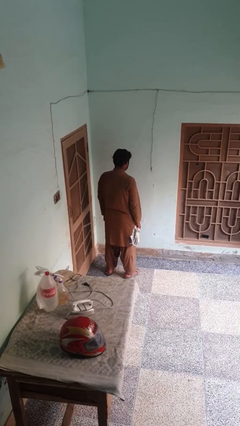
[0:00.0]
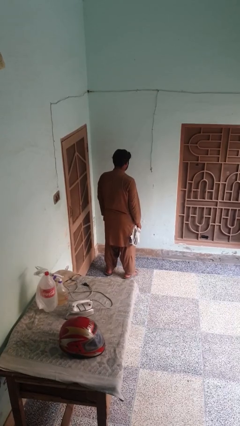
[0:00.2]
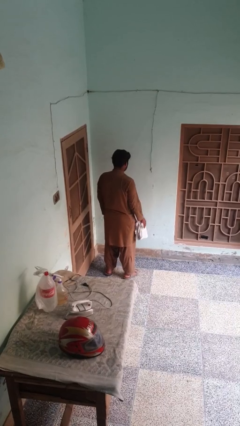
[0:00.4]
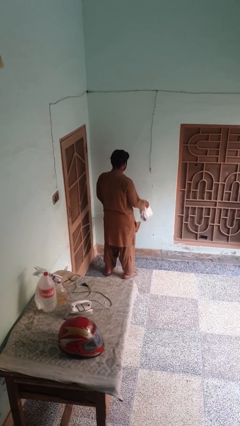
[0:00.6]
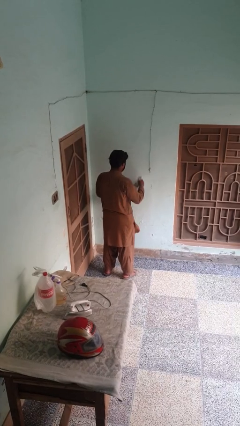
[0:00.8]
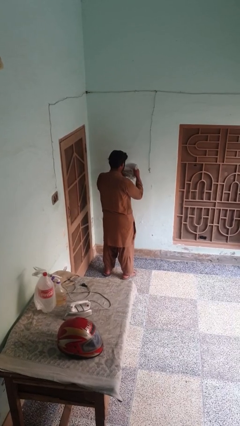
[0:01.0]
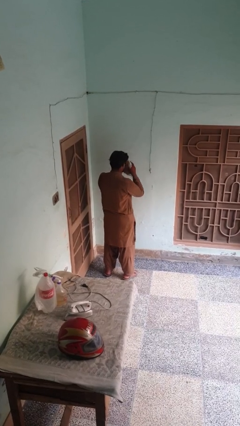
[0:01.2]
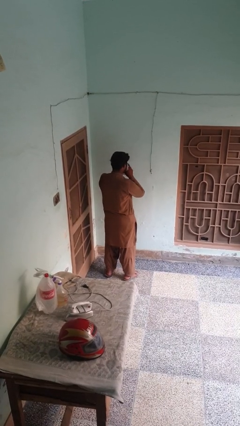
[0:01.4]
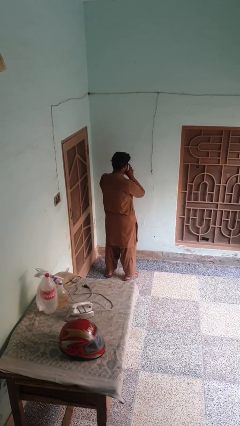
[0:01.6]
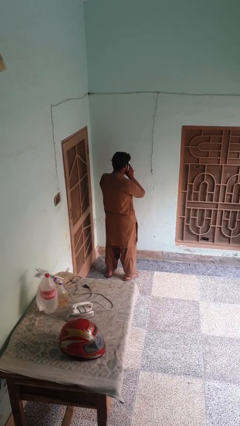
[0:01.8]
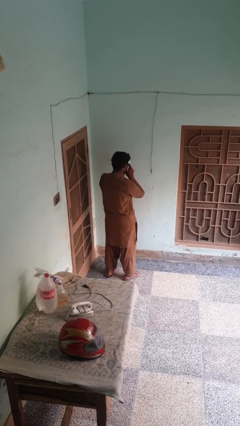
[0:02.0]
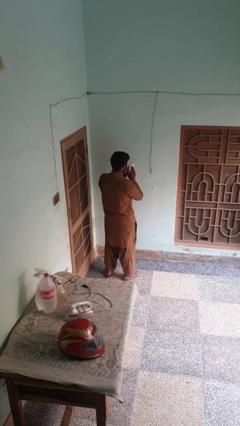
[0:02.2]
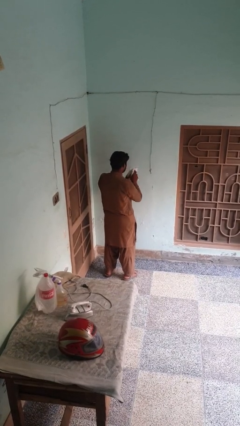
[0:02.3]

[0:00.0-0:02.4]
person blows nose

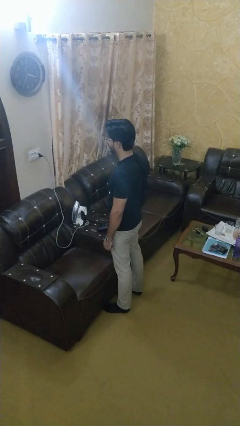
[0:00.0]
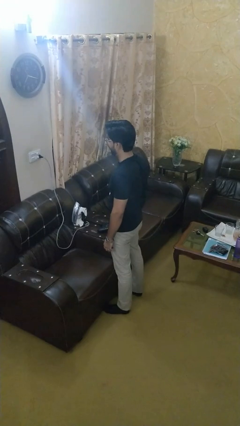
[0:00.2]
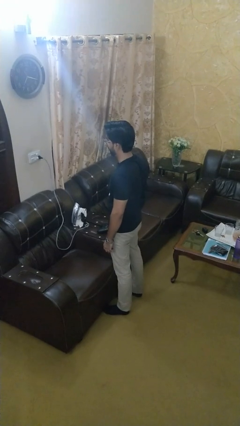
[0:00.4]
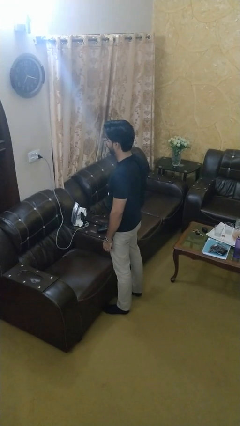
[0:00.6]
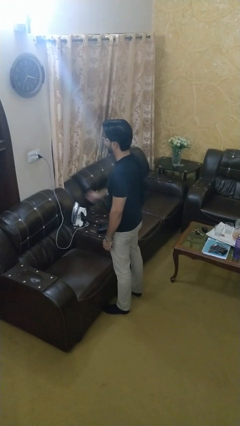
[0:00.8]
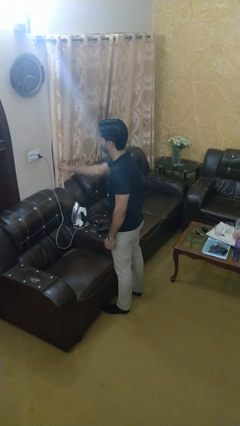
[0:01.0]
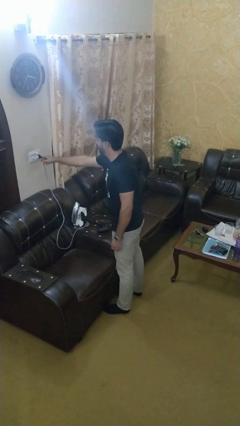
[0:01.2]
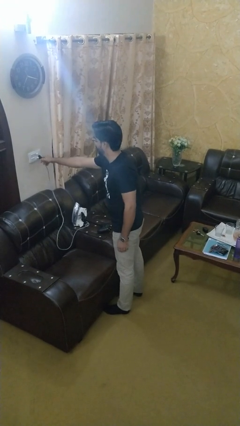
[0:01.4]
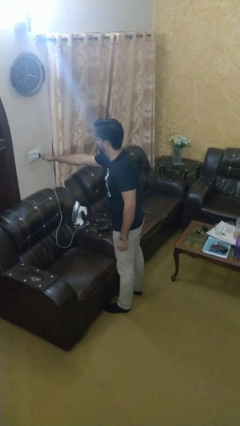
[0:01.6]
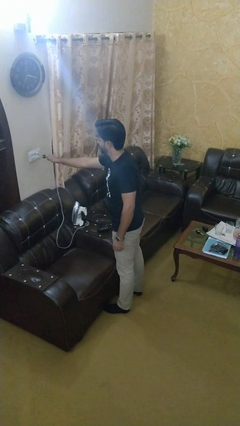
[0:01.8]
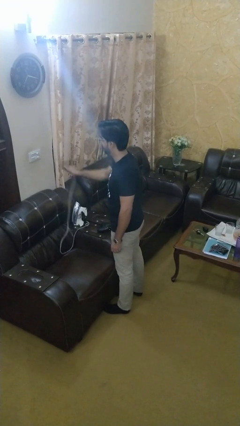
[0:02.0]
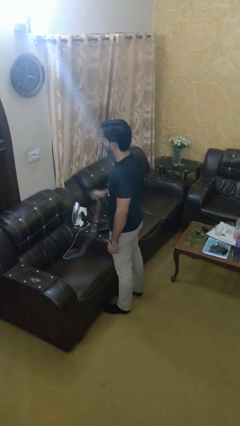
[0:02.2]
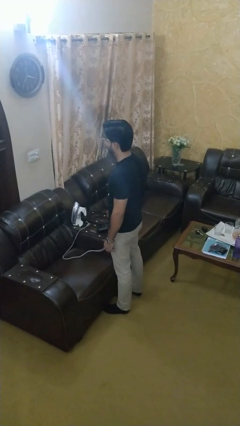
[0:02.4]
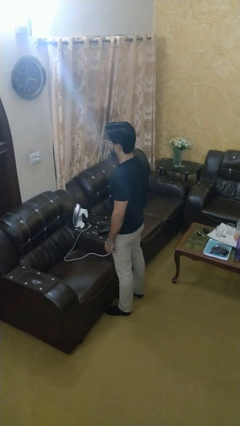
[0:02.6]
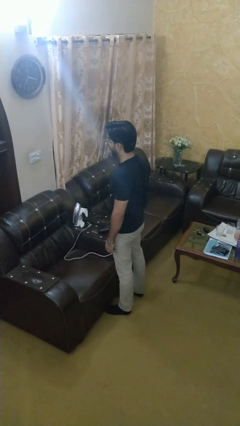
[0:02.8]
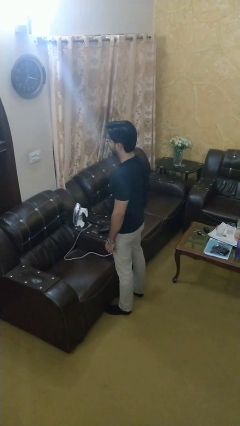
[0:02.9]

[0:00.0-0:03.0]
person unplugs from electrical socket

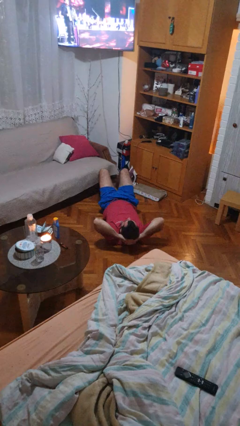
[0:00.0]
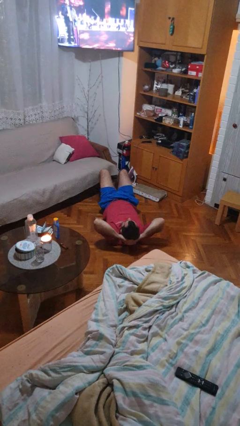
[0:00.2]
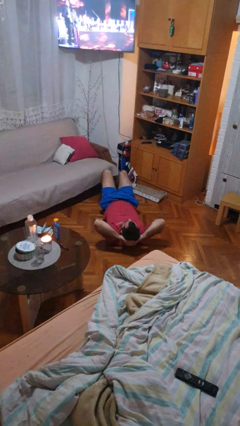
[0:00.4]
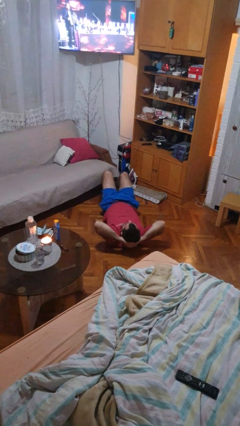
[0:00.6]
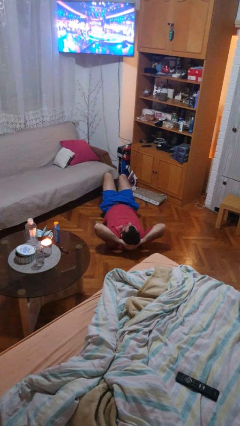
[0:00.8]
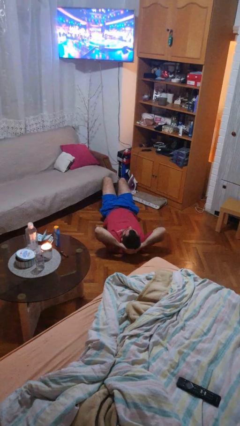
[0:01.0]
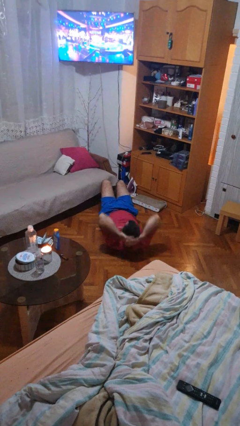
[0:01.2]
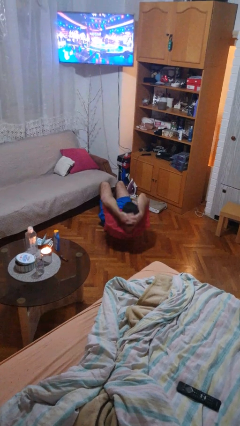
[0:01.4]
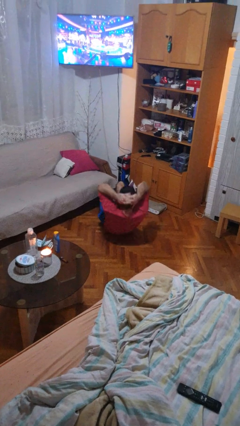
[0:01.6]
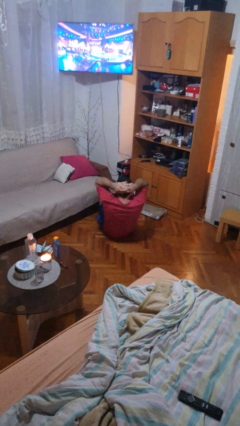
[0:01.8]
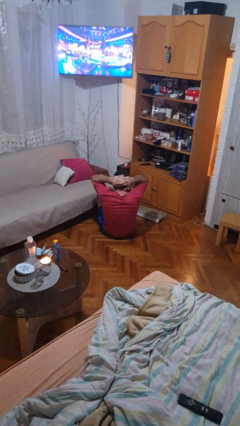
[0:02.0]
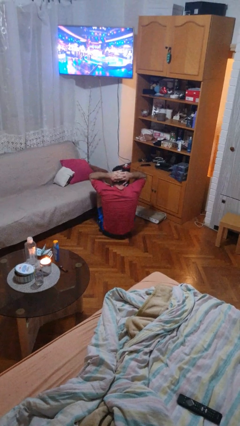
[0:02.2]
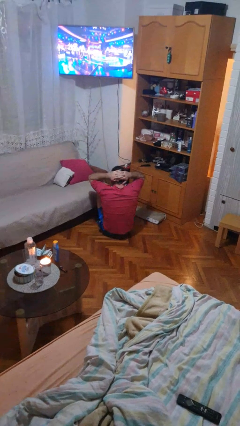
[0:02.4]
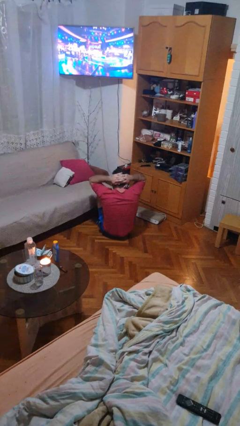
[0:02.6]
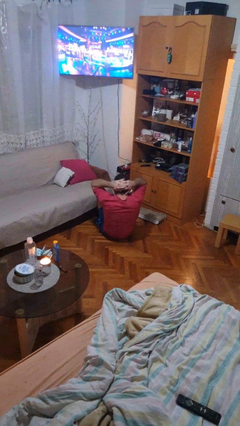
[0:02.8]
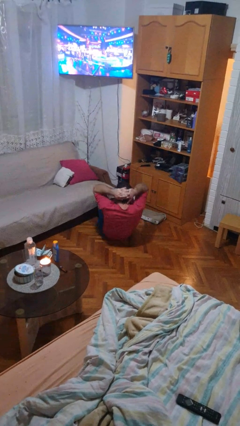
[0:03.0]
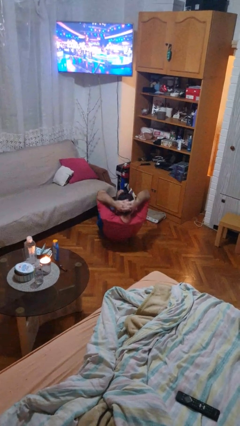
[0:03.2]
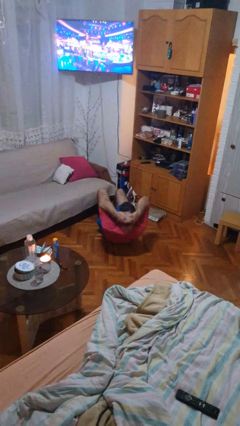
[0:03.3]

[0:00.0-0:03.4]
person exercises with situp

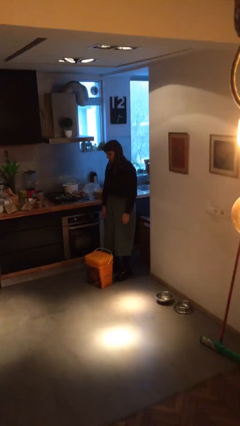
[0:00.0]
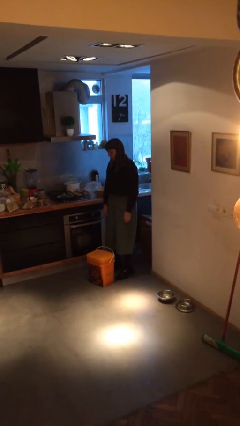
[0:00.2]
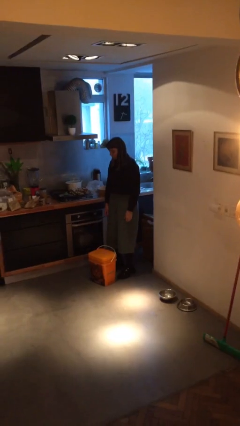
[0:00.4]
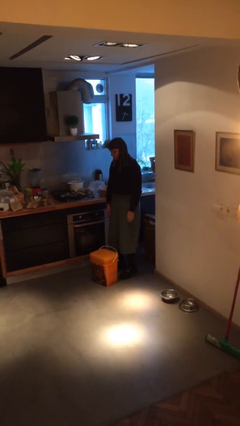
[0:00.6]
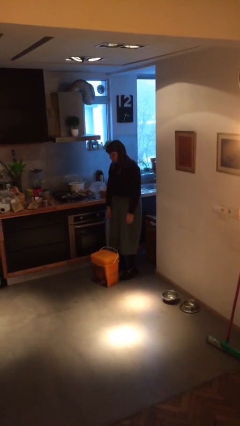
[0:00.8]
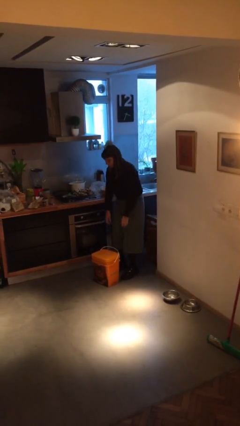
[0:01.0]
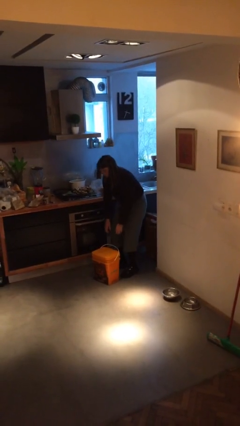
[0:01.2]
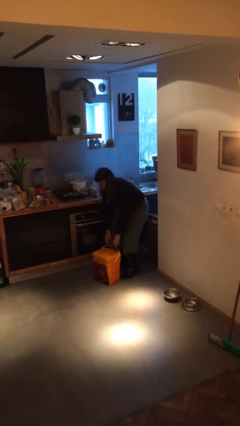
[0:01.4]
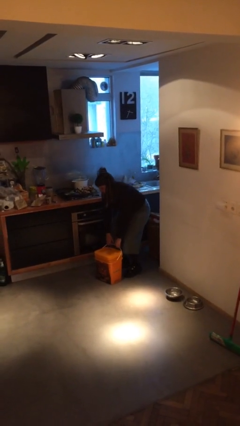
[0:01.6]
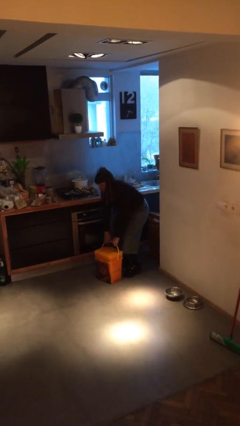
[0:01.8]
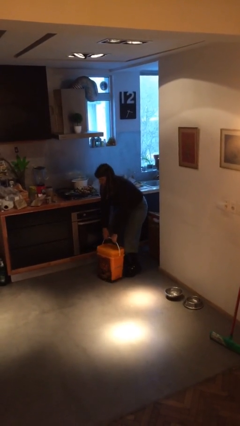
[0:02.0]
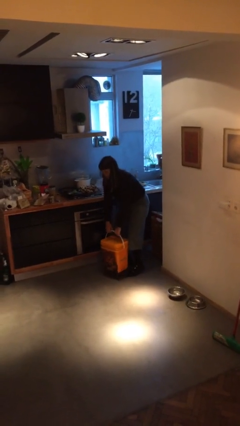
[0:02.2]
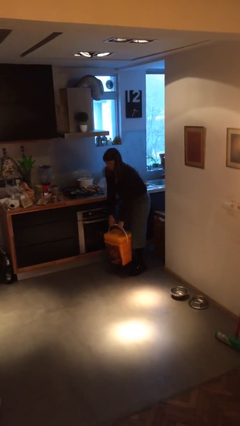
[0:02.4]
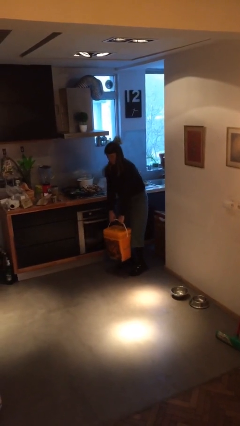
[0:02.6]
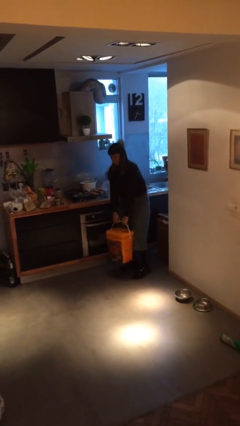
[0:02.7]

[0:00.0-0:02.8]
person picks up object from floor

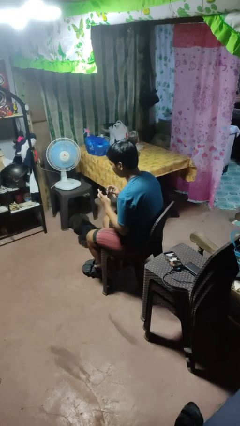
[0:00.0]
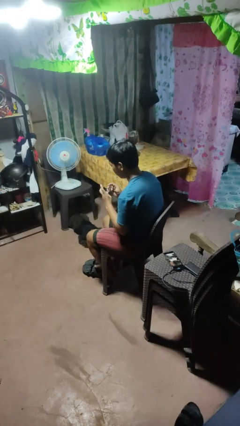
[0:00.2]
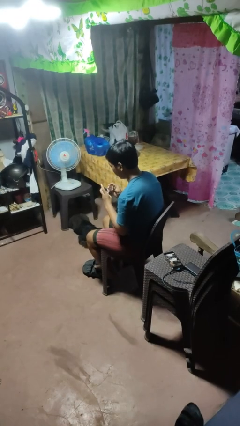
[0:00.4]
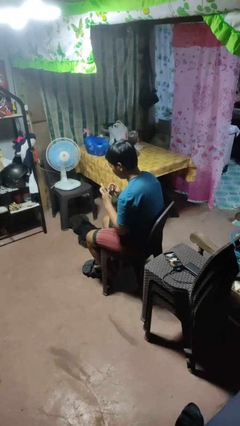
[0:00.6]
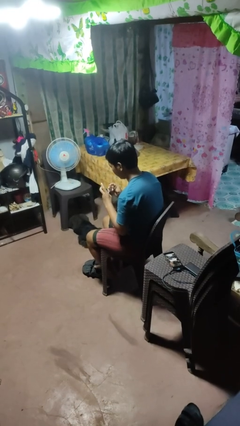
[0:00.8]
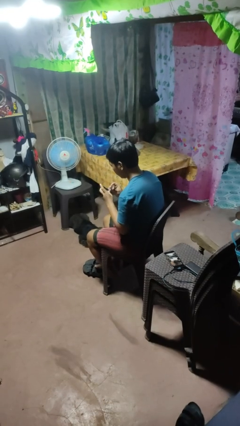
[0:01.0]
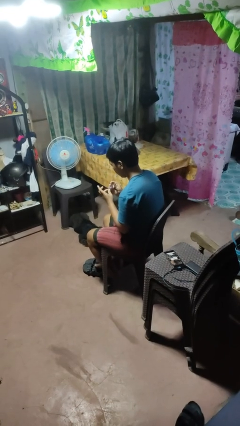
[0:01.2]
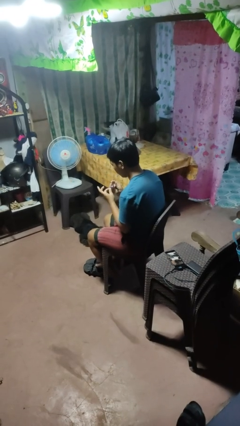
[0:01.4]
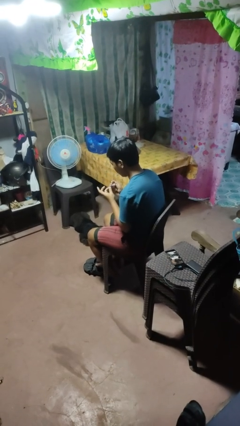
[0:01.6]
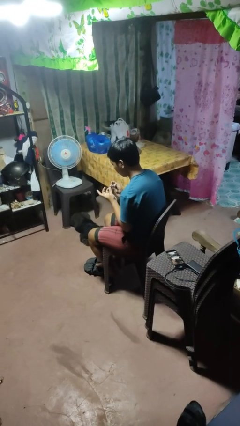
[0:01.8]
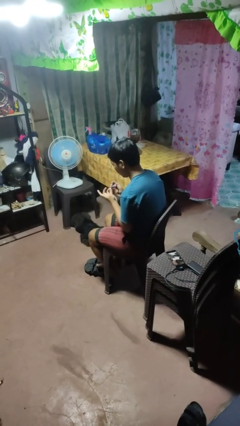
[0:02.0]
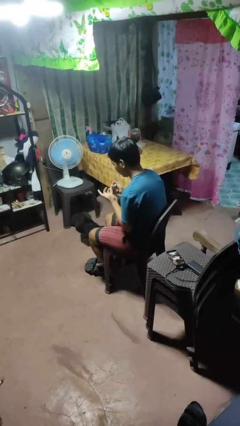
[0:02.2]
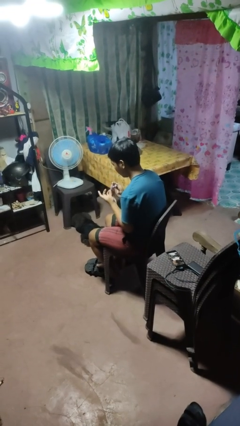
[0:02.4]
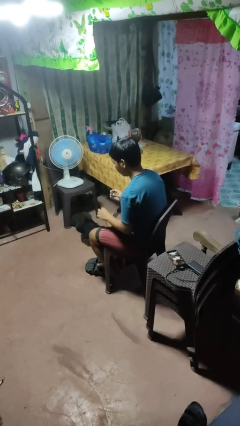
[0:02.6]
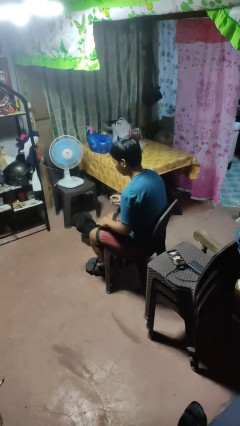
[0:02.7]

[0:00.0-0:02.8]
person clips fingernails

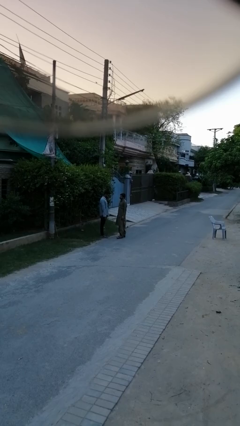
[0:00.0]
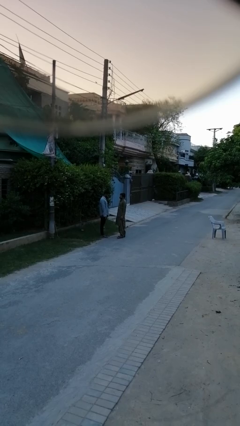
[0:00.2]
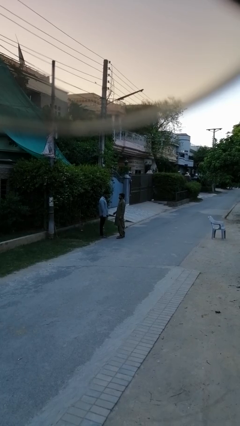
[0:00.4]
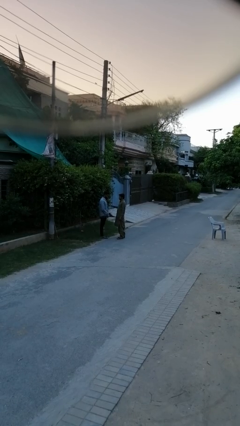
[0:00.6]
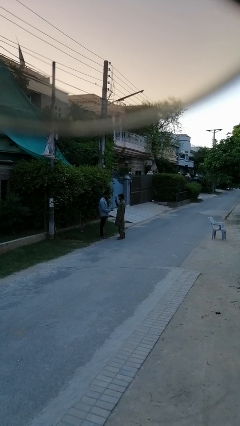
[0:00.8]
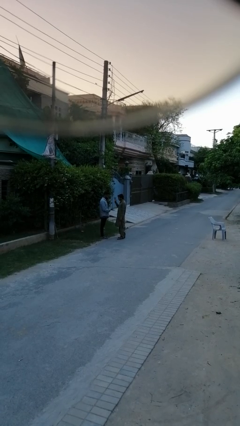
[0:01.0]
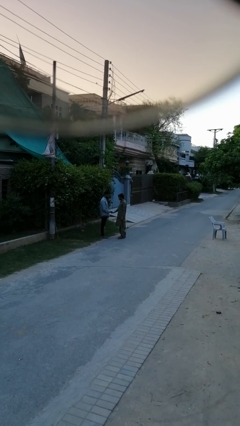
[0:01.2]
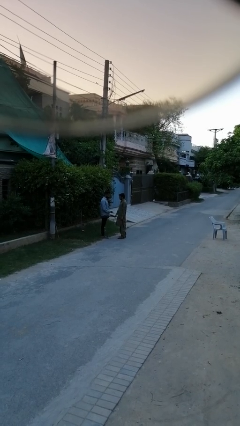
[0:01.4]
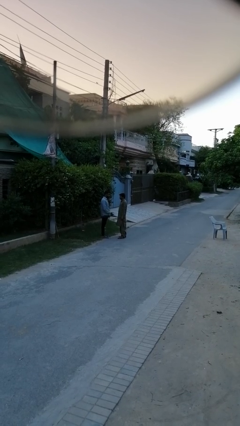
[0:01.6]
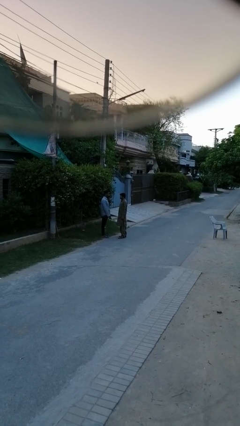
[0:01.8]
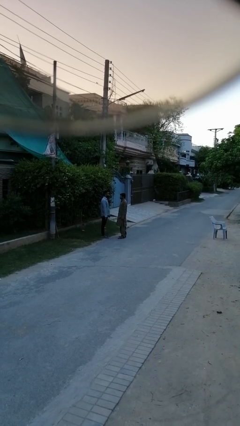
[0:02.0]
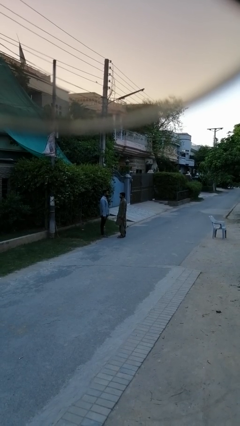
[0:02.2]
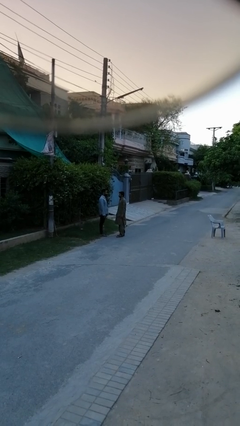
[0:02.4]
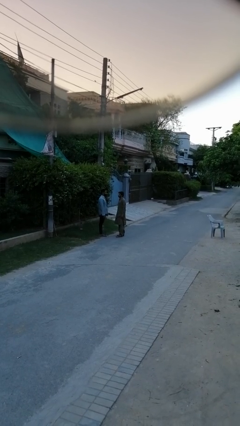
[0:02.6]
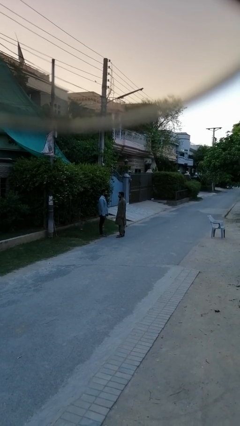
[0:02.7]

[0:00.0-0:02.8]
person highfives hand

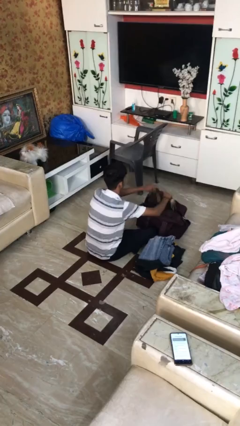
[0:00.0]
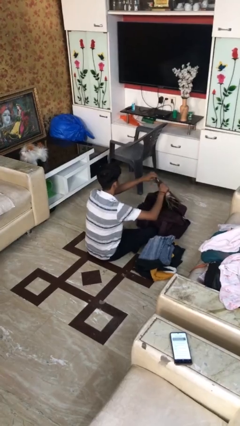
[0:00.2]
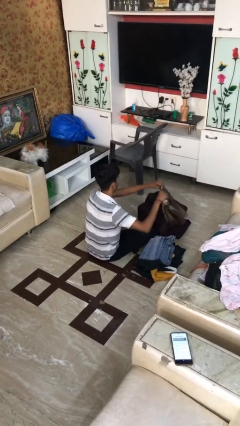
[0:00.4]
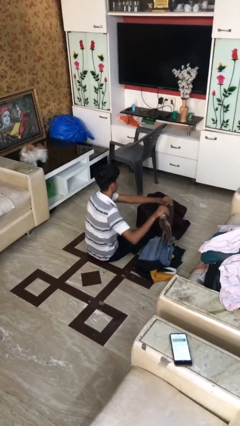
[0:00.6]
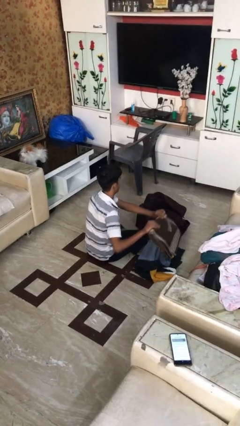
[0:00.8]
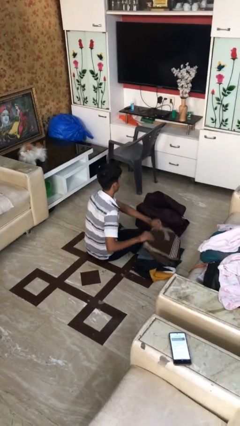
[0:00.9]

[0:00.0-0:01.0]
person unloads clothes from suitcase
